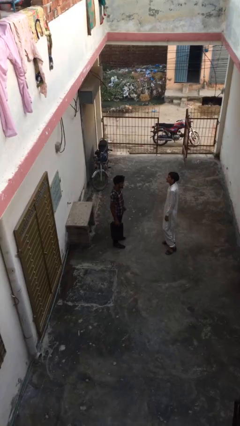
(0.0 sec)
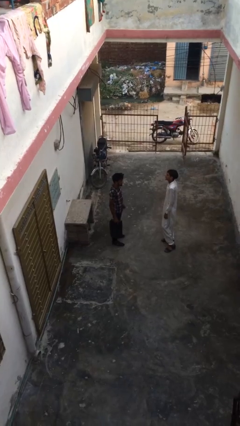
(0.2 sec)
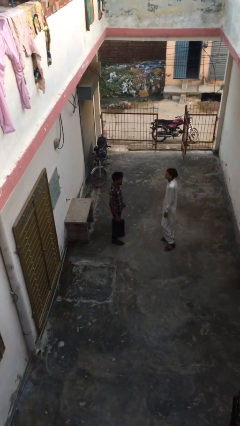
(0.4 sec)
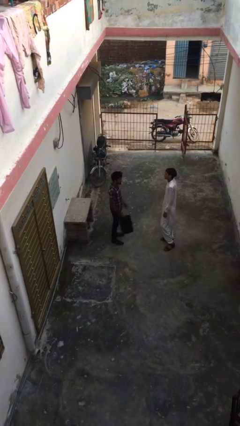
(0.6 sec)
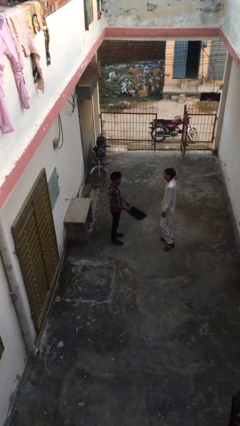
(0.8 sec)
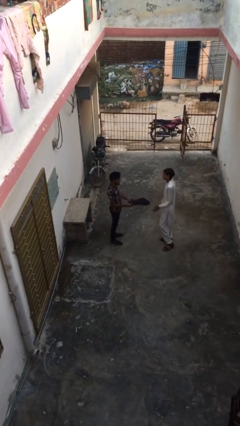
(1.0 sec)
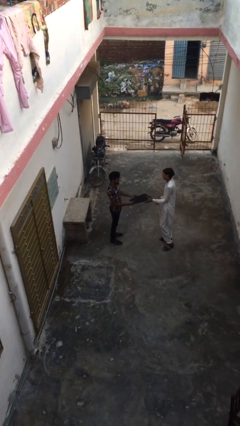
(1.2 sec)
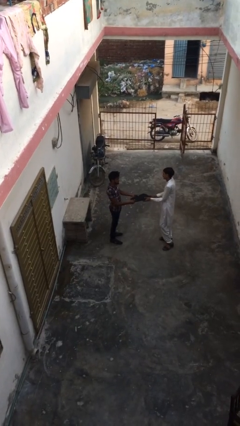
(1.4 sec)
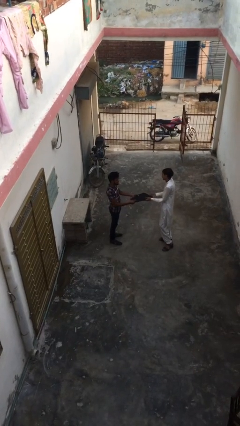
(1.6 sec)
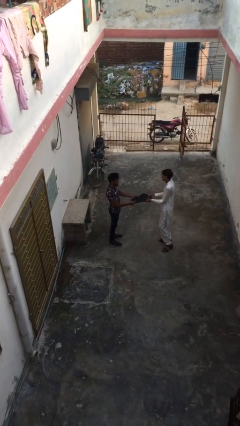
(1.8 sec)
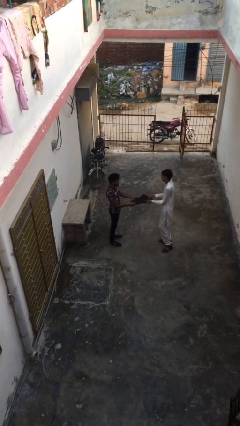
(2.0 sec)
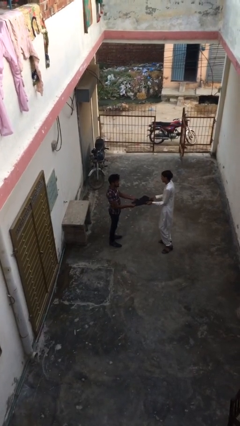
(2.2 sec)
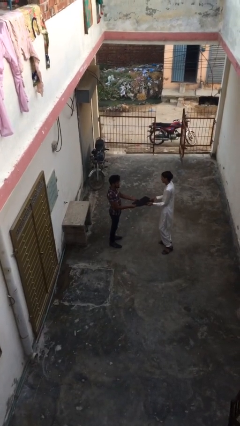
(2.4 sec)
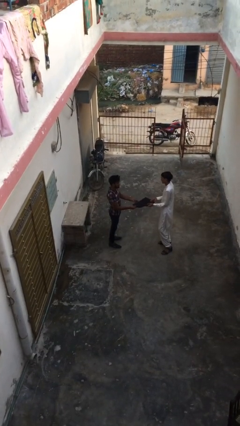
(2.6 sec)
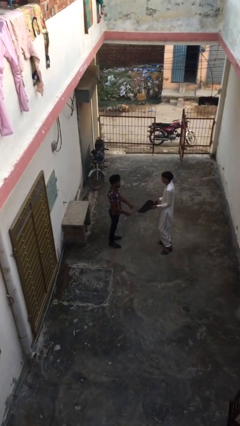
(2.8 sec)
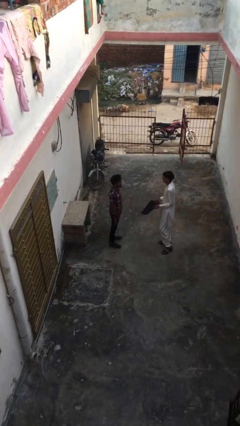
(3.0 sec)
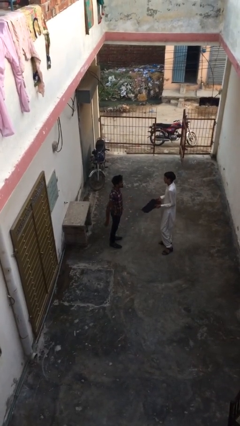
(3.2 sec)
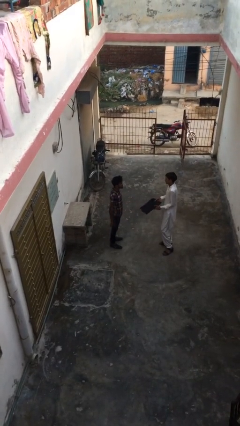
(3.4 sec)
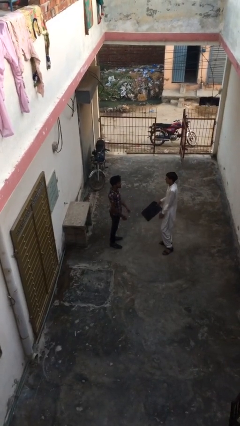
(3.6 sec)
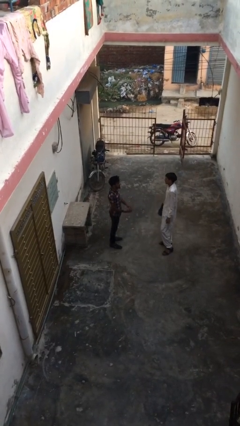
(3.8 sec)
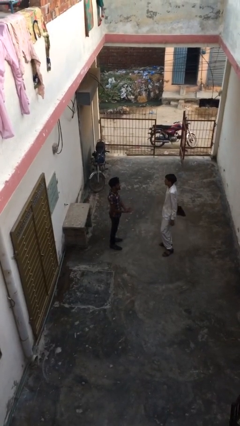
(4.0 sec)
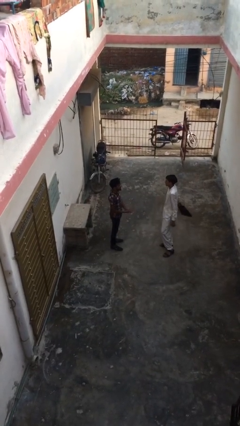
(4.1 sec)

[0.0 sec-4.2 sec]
person transfers object to person

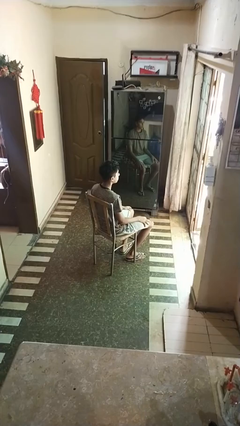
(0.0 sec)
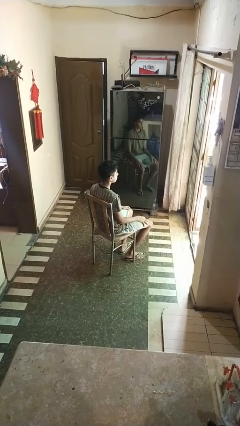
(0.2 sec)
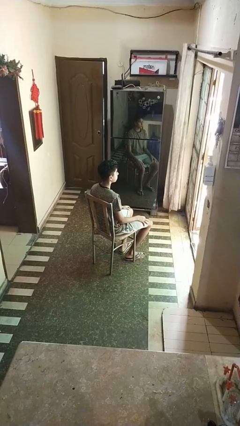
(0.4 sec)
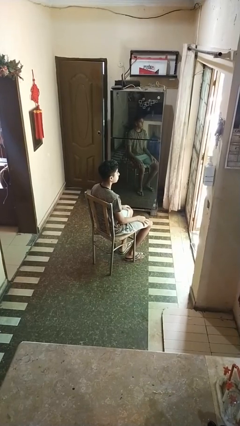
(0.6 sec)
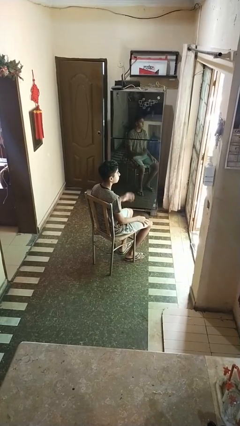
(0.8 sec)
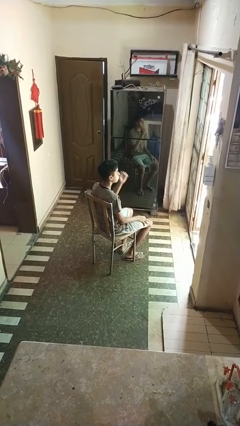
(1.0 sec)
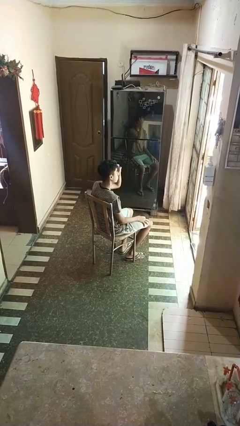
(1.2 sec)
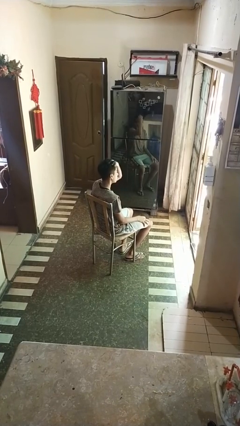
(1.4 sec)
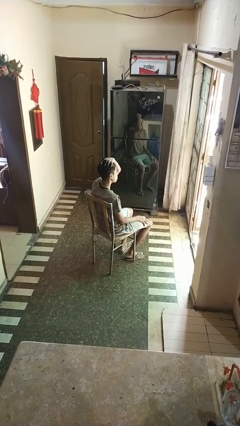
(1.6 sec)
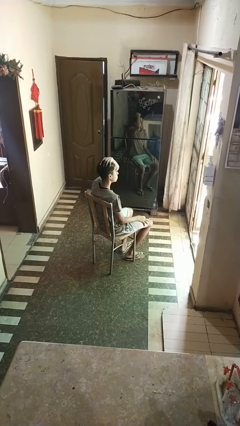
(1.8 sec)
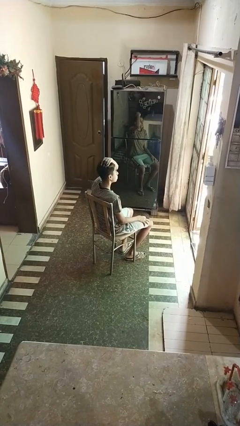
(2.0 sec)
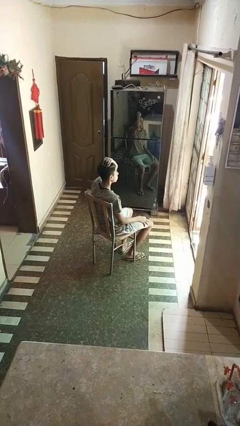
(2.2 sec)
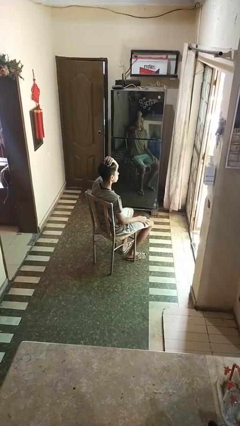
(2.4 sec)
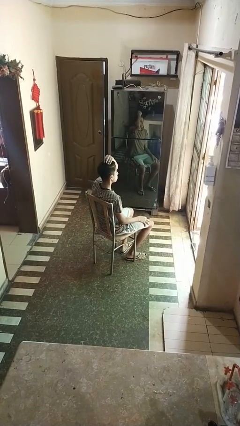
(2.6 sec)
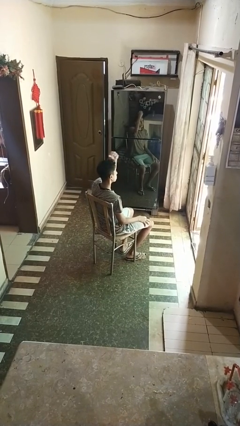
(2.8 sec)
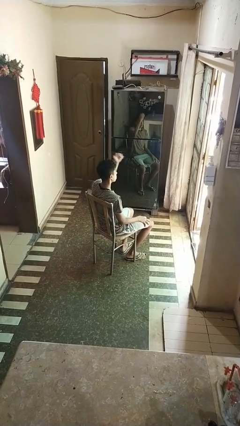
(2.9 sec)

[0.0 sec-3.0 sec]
person strokes hair

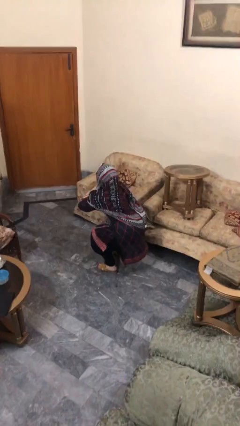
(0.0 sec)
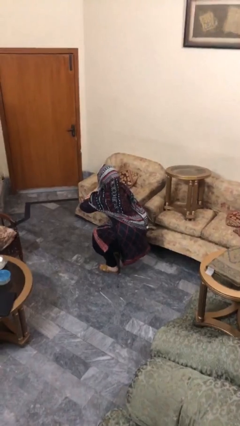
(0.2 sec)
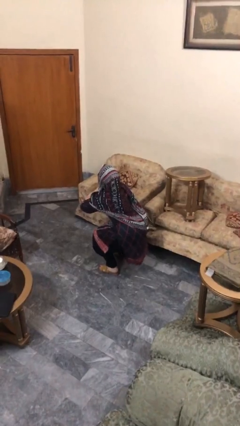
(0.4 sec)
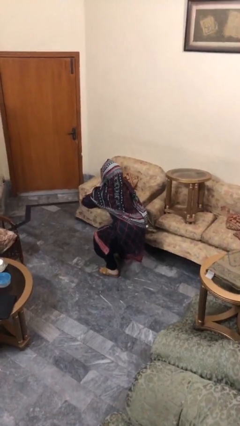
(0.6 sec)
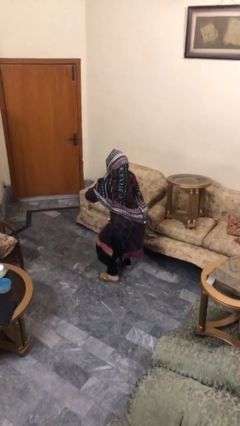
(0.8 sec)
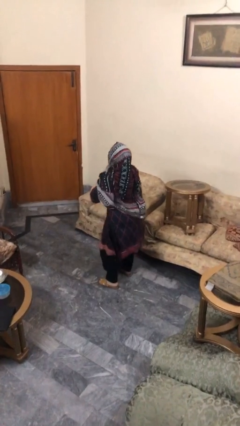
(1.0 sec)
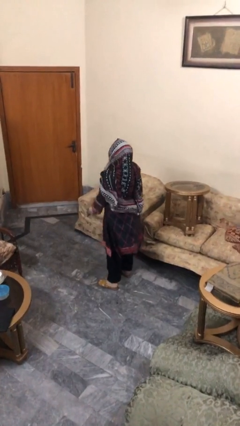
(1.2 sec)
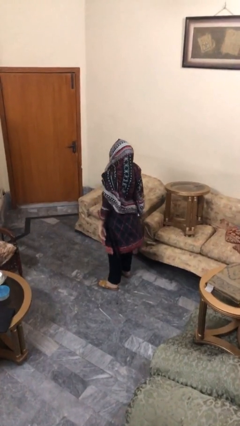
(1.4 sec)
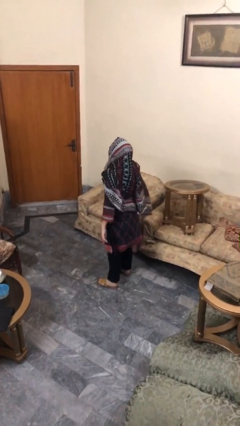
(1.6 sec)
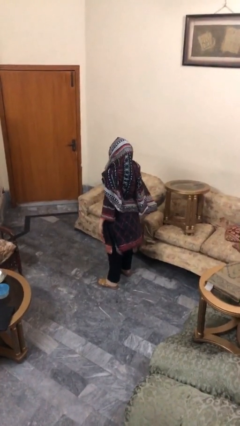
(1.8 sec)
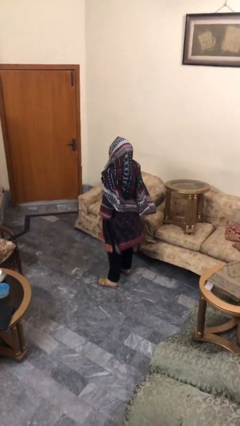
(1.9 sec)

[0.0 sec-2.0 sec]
person stands up

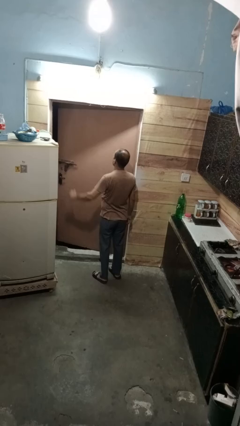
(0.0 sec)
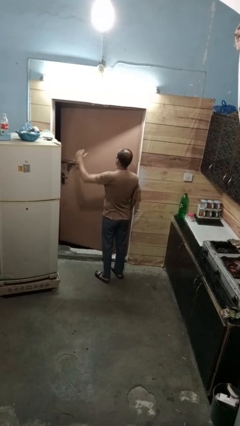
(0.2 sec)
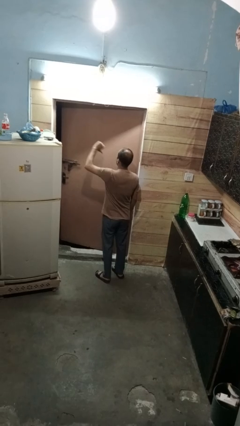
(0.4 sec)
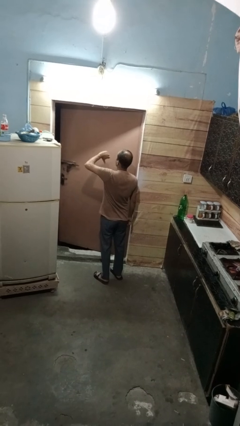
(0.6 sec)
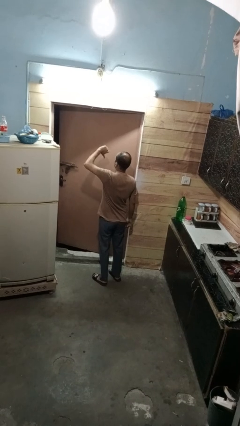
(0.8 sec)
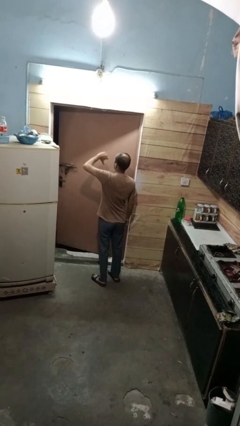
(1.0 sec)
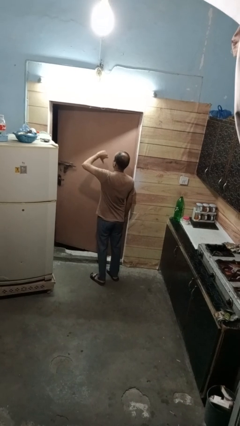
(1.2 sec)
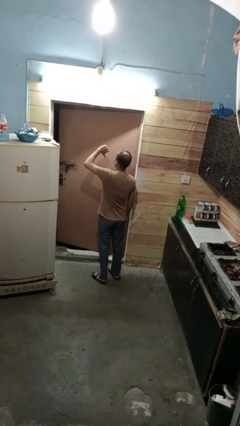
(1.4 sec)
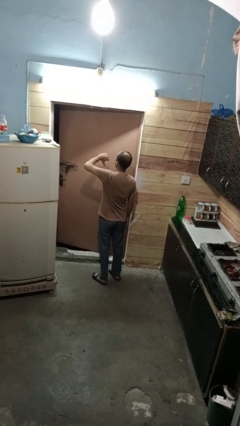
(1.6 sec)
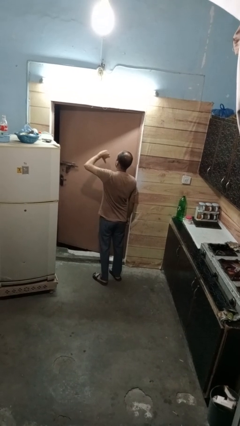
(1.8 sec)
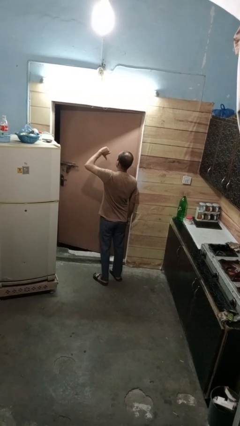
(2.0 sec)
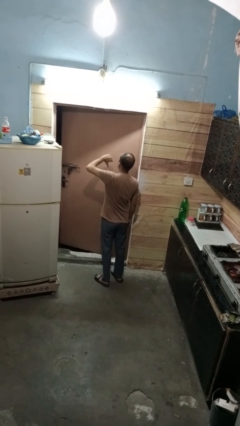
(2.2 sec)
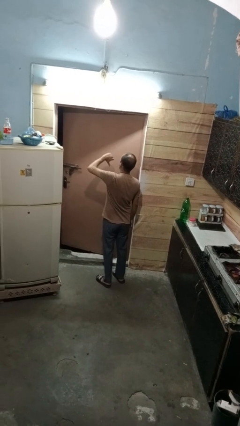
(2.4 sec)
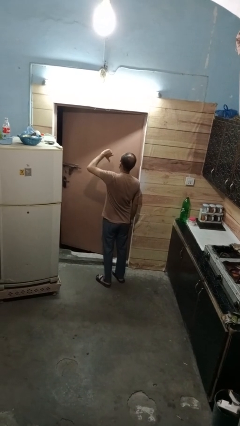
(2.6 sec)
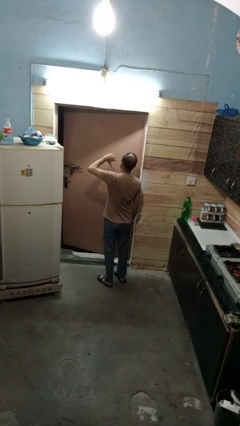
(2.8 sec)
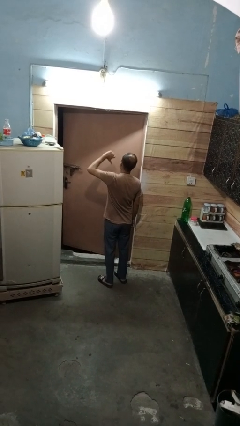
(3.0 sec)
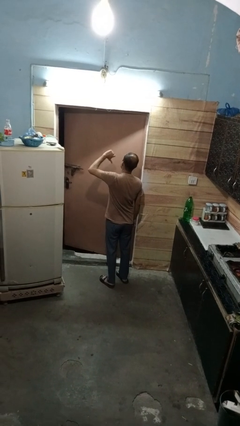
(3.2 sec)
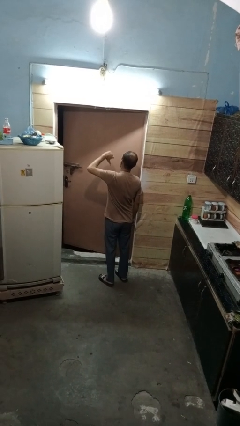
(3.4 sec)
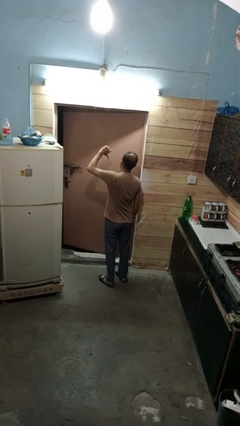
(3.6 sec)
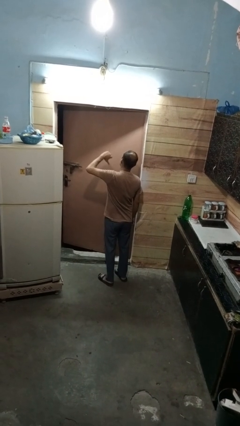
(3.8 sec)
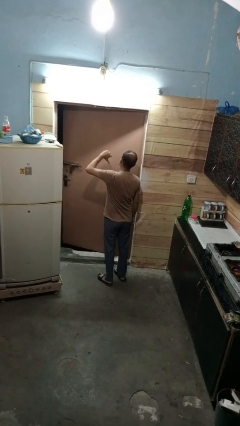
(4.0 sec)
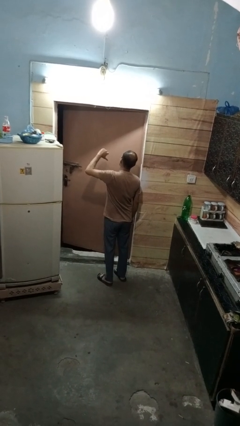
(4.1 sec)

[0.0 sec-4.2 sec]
person gestures hang loose

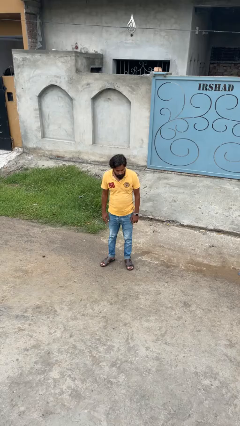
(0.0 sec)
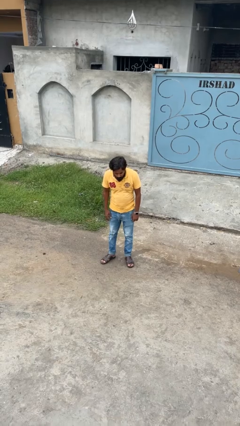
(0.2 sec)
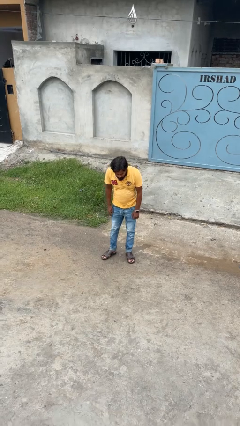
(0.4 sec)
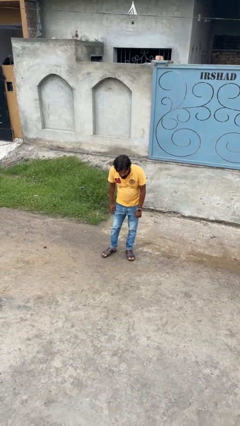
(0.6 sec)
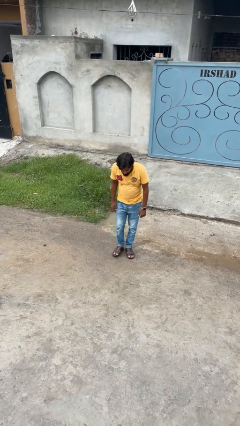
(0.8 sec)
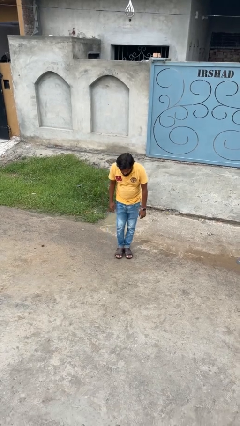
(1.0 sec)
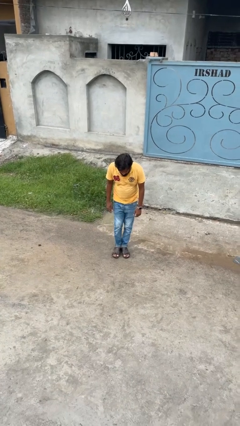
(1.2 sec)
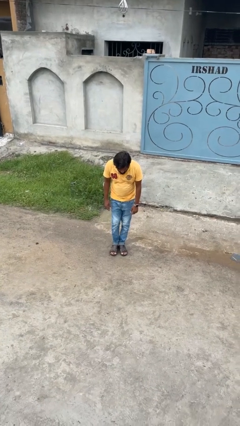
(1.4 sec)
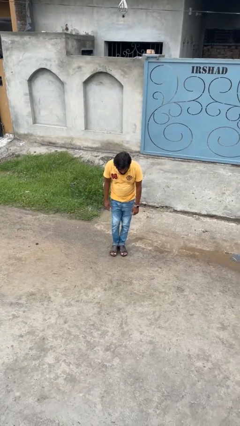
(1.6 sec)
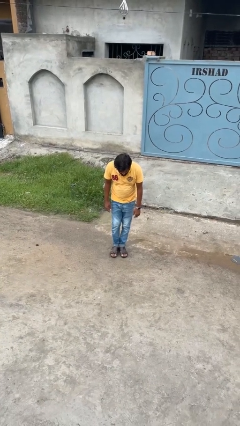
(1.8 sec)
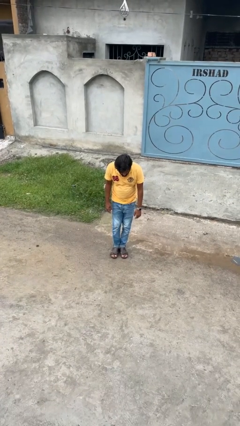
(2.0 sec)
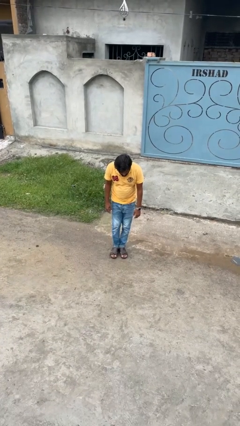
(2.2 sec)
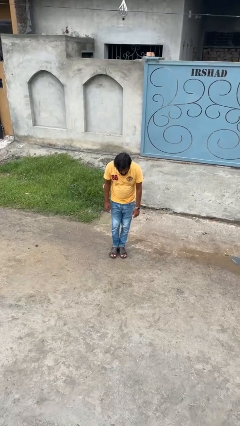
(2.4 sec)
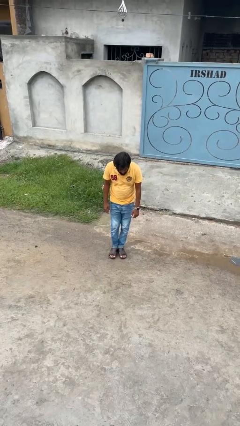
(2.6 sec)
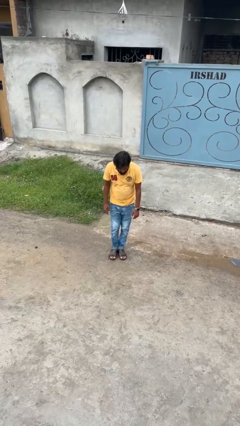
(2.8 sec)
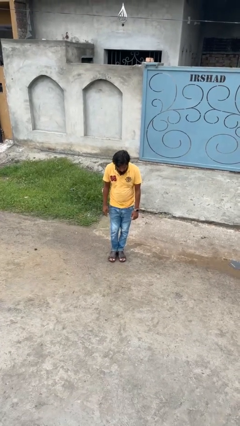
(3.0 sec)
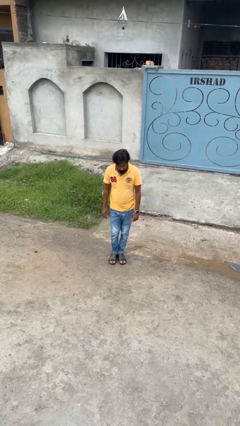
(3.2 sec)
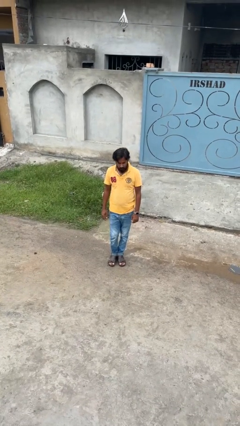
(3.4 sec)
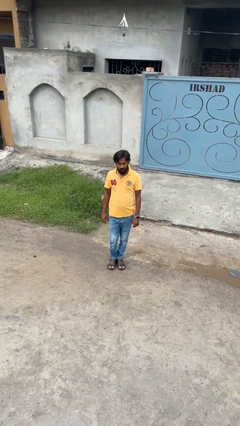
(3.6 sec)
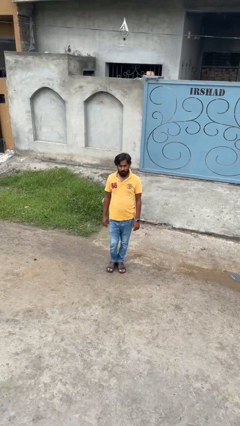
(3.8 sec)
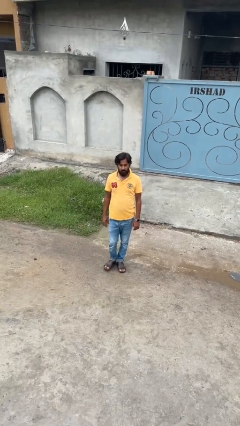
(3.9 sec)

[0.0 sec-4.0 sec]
person bows

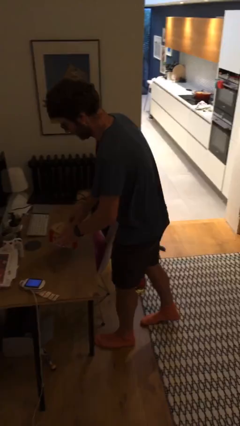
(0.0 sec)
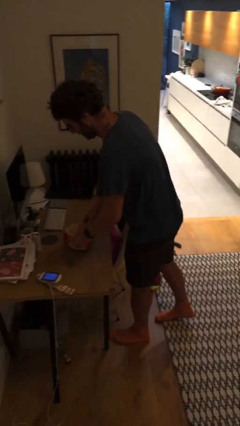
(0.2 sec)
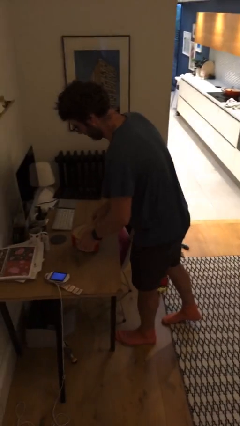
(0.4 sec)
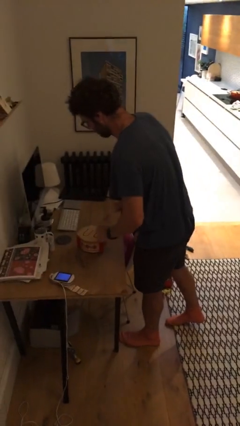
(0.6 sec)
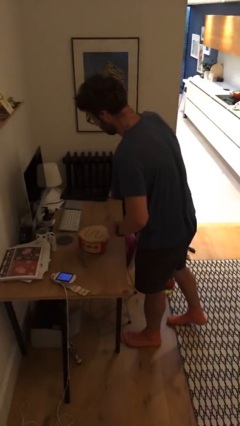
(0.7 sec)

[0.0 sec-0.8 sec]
person puts down object on table
